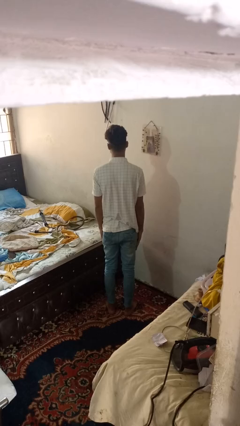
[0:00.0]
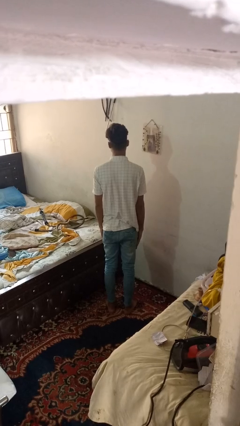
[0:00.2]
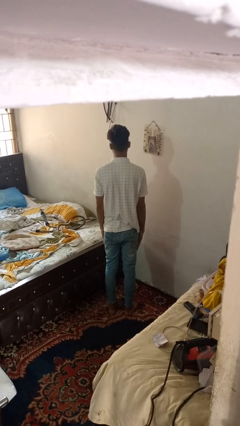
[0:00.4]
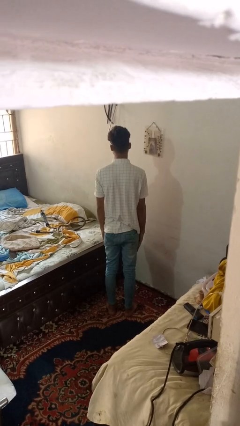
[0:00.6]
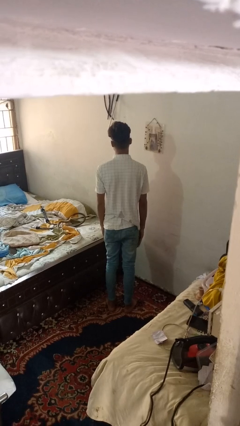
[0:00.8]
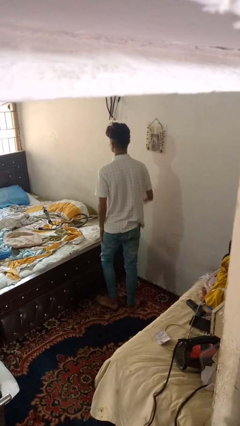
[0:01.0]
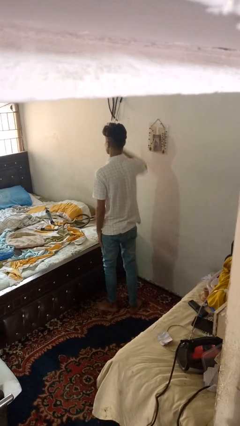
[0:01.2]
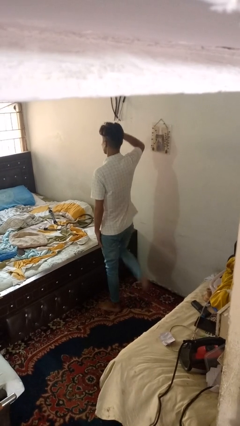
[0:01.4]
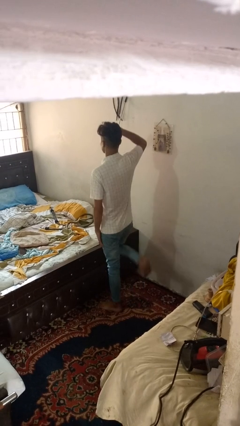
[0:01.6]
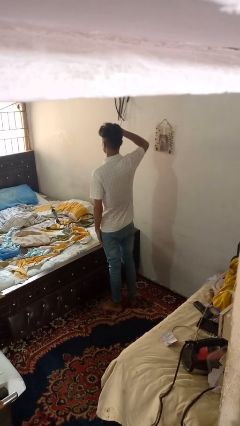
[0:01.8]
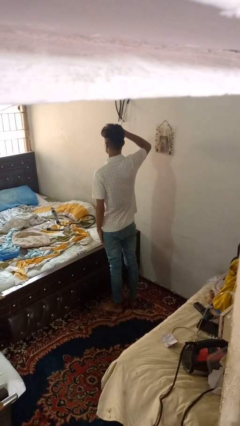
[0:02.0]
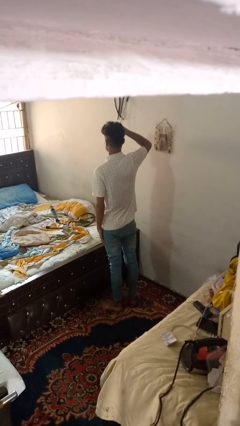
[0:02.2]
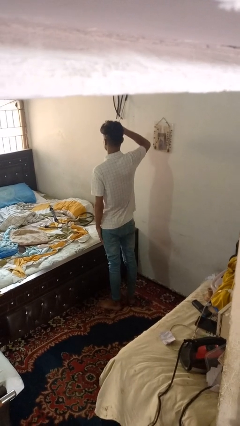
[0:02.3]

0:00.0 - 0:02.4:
person salutes

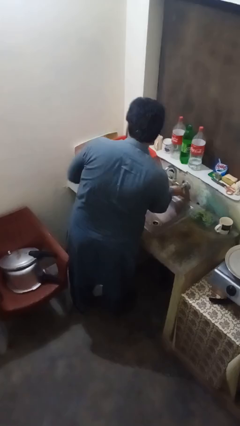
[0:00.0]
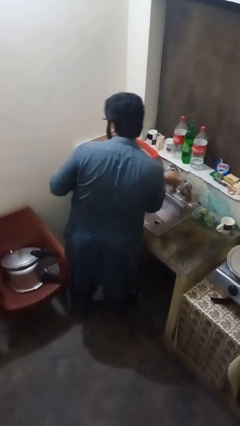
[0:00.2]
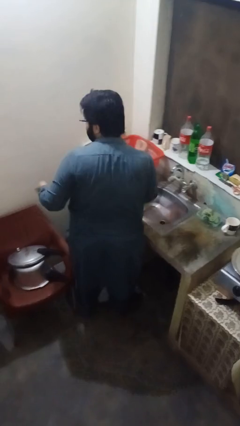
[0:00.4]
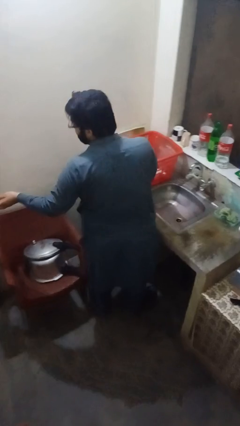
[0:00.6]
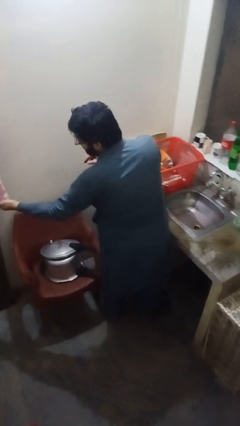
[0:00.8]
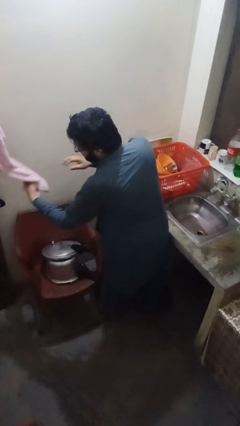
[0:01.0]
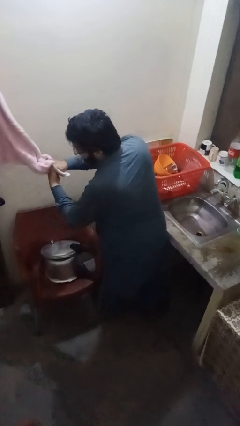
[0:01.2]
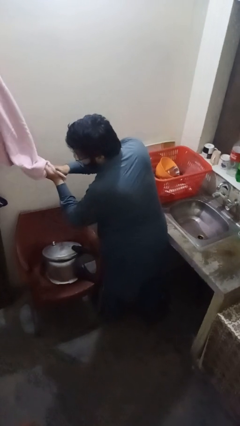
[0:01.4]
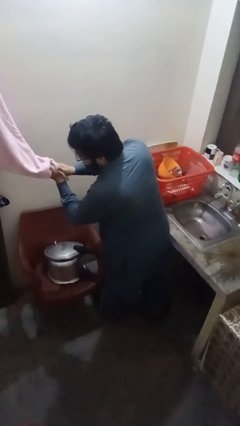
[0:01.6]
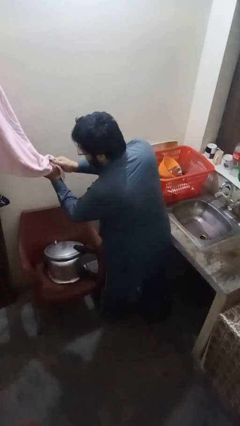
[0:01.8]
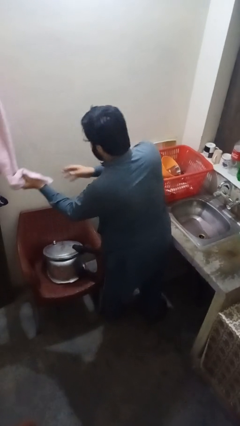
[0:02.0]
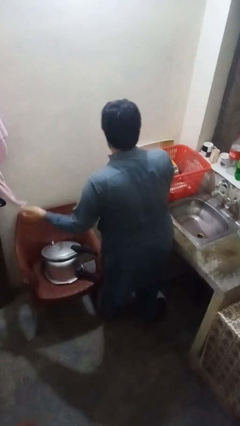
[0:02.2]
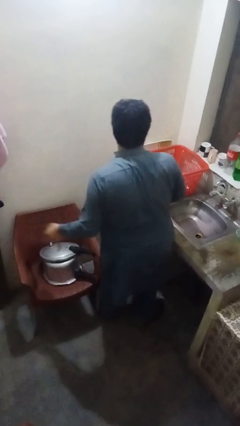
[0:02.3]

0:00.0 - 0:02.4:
person dries hands with towel

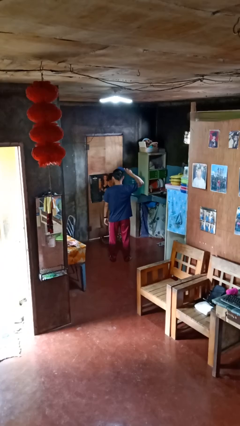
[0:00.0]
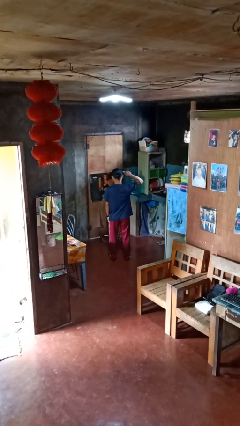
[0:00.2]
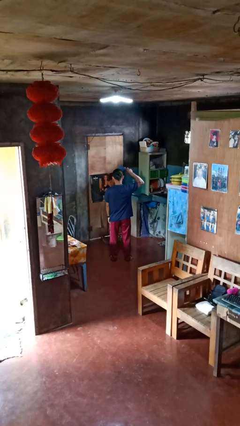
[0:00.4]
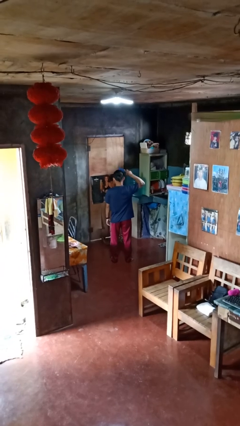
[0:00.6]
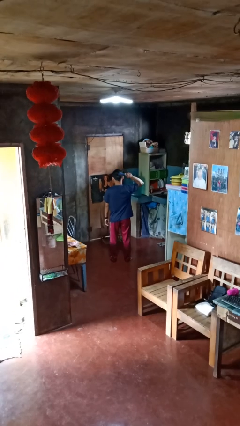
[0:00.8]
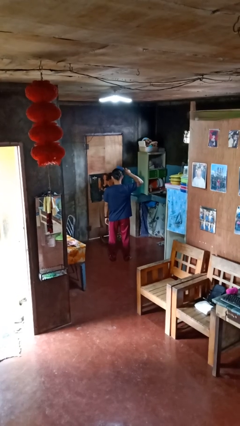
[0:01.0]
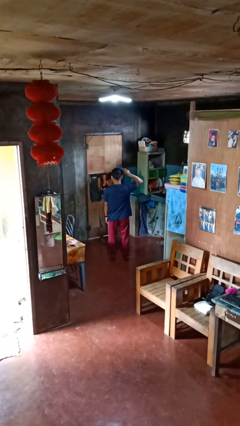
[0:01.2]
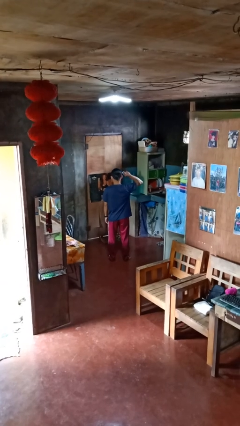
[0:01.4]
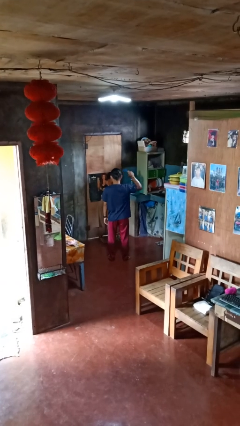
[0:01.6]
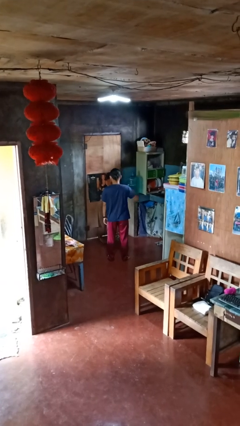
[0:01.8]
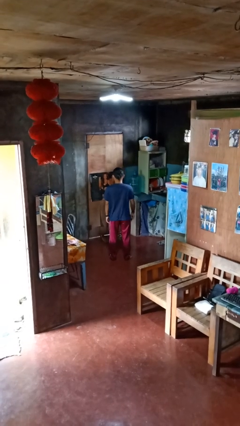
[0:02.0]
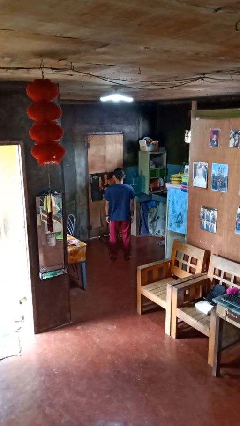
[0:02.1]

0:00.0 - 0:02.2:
person brushes hair

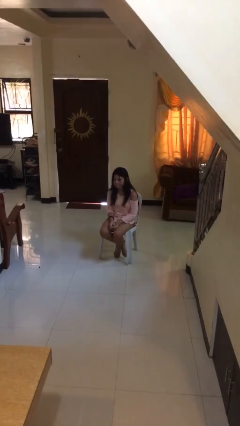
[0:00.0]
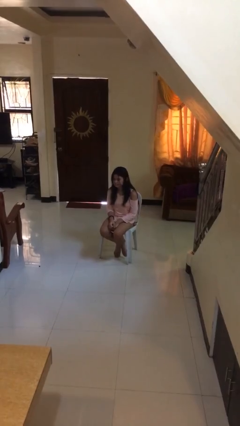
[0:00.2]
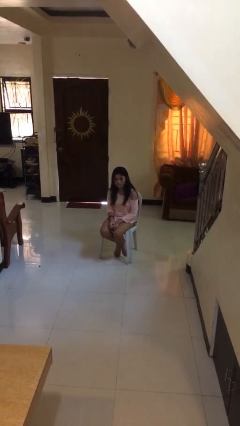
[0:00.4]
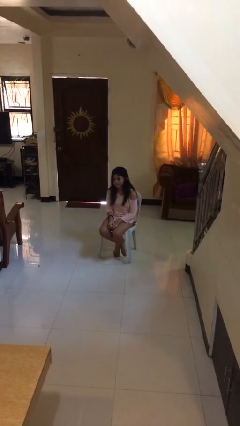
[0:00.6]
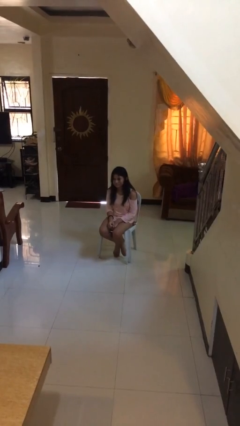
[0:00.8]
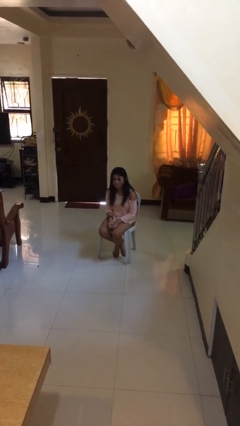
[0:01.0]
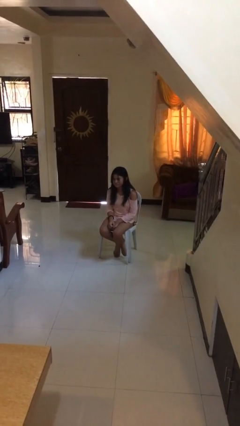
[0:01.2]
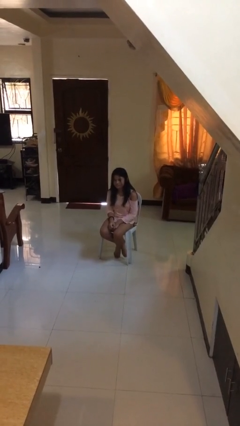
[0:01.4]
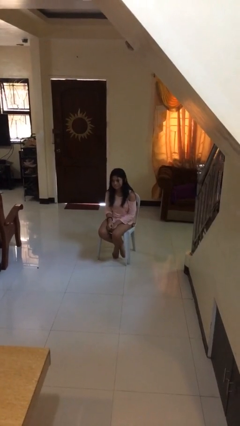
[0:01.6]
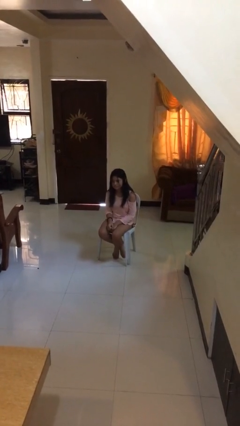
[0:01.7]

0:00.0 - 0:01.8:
person shakes head

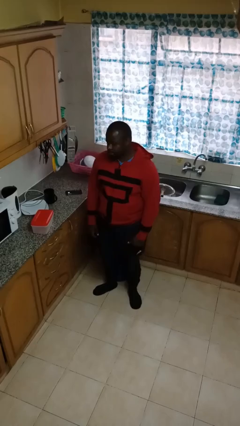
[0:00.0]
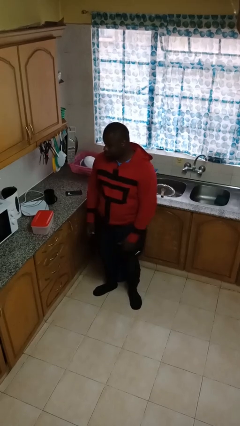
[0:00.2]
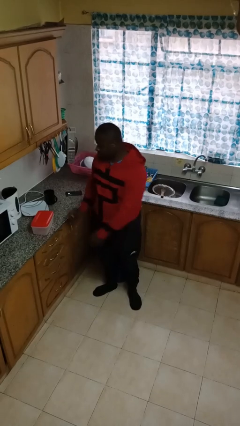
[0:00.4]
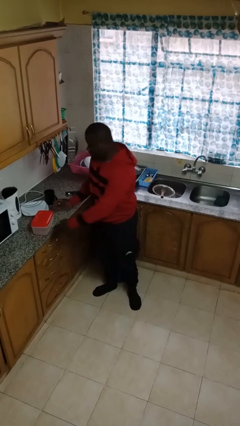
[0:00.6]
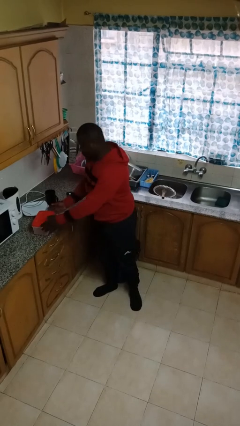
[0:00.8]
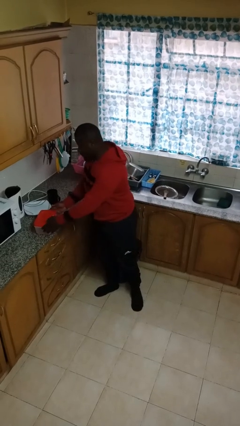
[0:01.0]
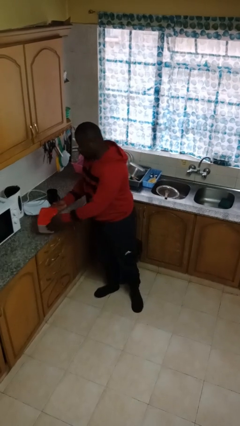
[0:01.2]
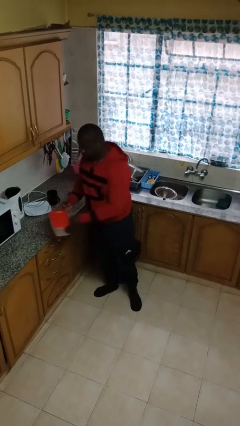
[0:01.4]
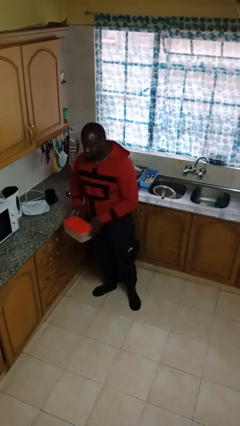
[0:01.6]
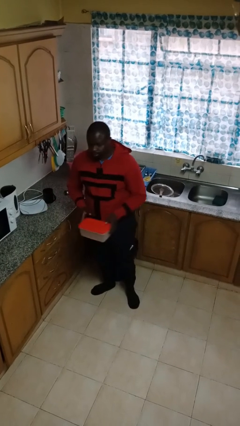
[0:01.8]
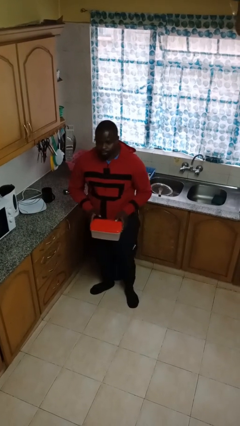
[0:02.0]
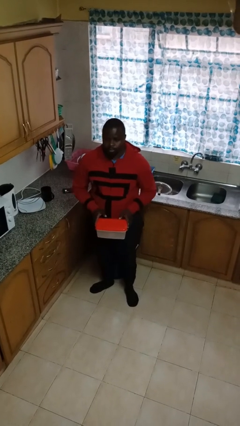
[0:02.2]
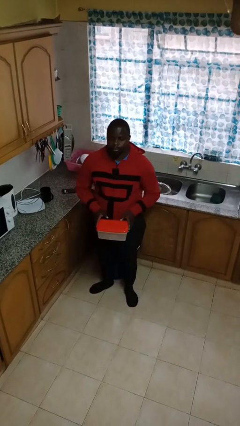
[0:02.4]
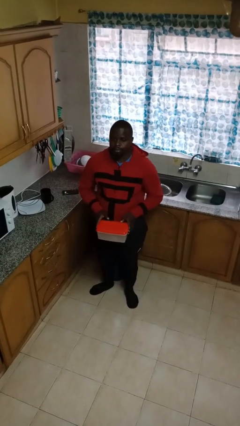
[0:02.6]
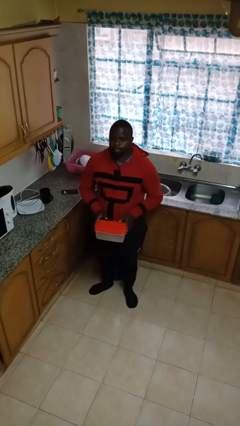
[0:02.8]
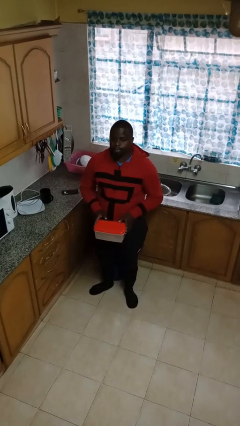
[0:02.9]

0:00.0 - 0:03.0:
person picks up object from countertop

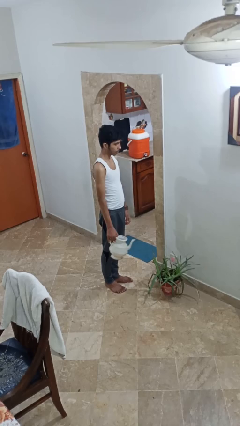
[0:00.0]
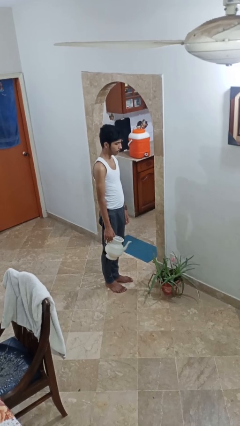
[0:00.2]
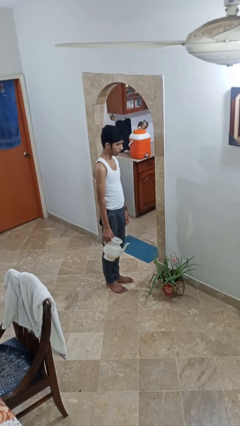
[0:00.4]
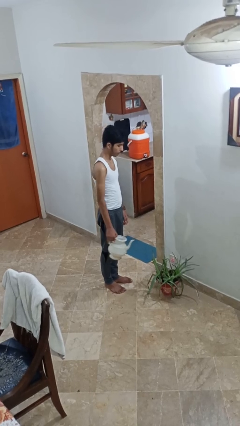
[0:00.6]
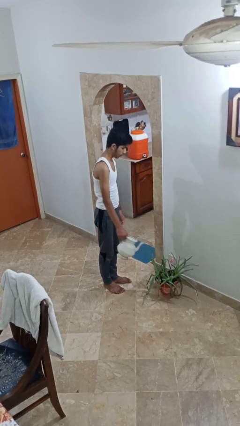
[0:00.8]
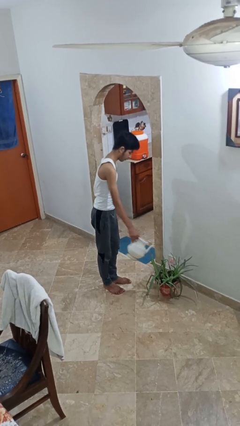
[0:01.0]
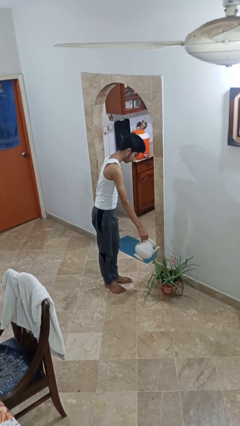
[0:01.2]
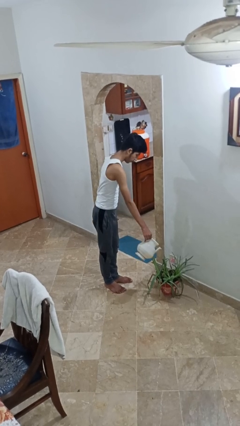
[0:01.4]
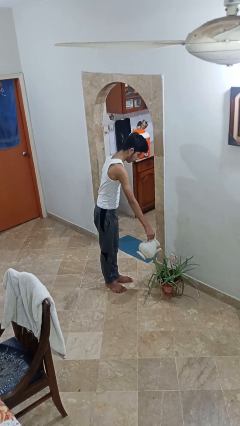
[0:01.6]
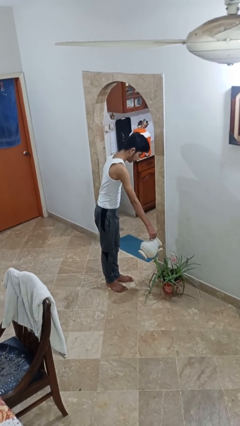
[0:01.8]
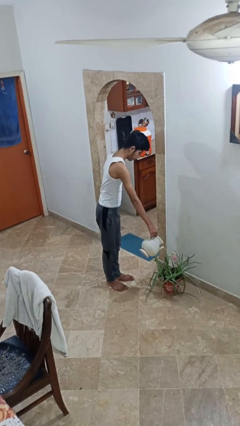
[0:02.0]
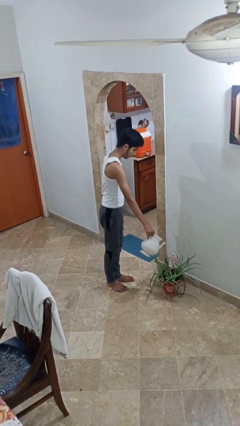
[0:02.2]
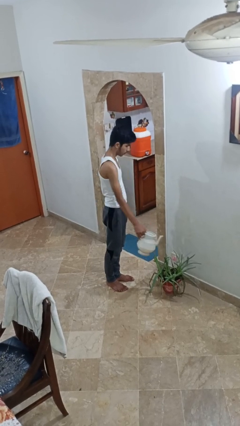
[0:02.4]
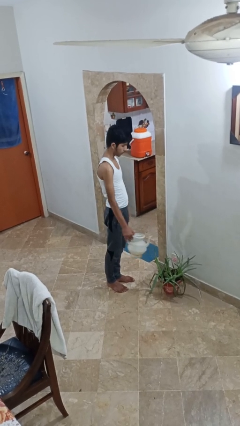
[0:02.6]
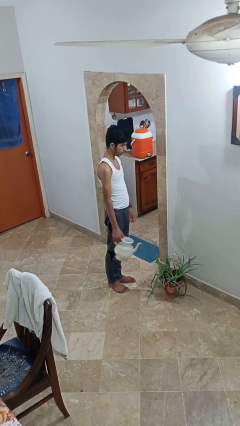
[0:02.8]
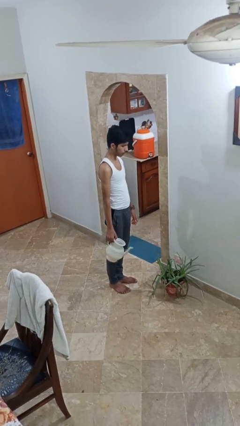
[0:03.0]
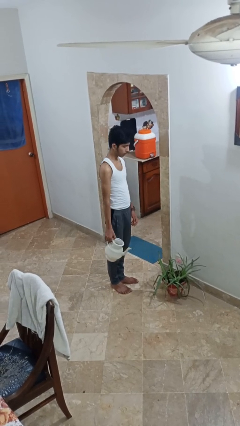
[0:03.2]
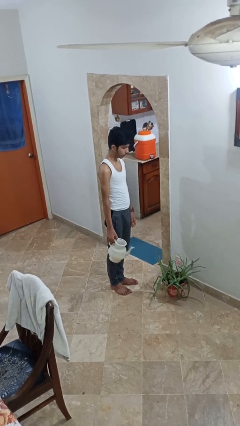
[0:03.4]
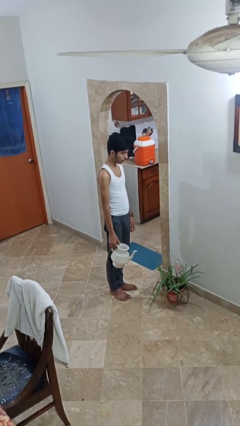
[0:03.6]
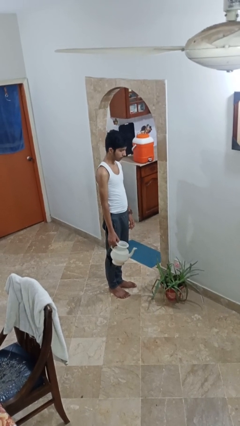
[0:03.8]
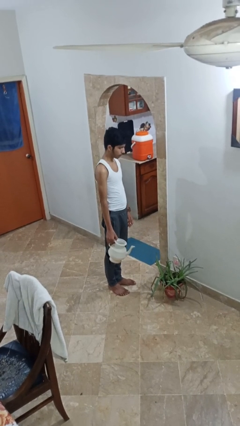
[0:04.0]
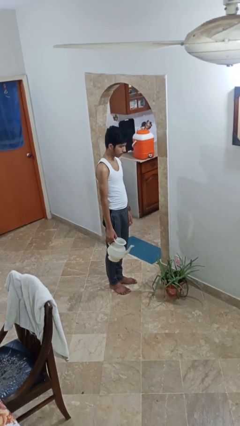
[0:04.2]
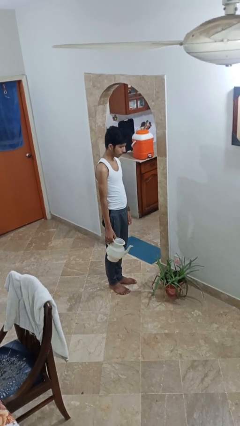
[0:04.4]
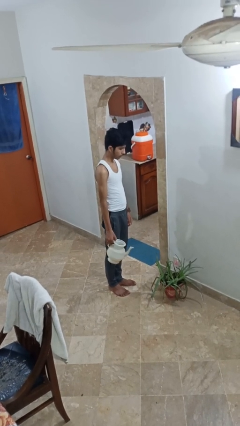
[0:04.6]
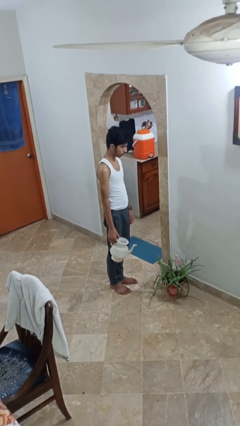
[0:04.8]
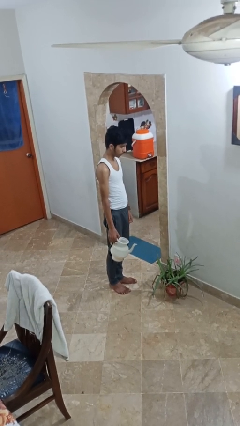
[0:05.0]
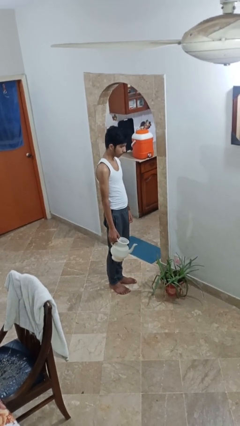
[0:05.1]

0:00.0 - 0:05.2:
person waters houseplant

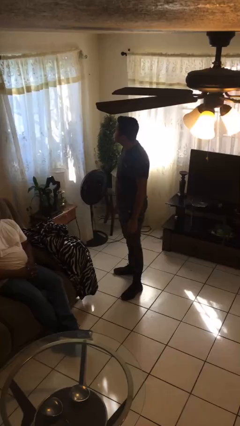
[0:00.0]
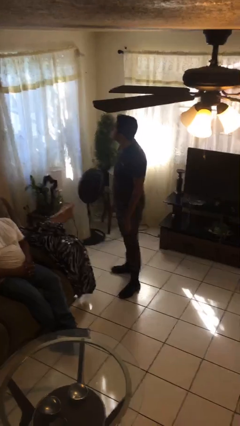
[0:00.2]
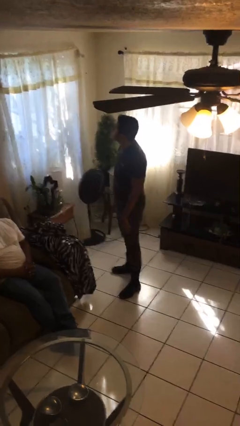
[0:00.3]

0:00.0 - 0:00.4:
person uncovers friend with blanket
